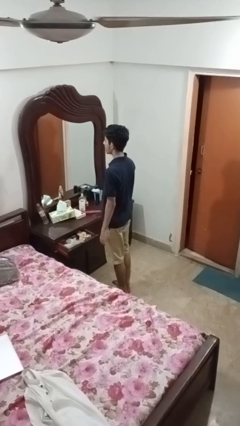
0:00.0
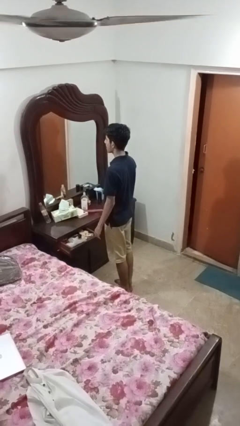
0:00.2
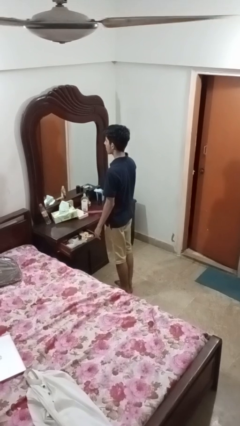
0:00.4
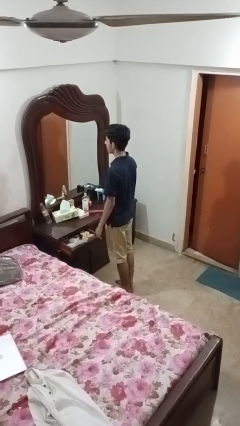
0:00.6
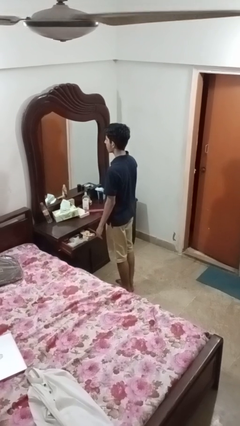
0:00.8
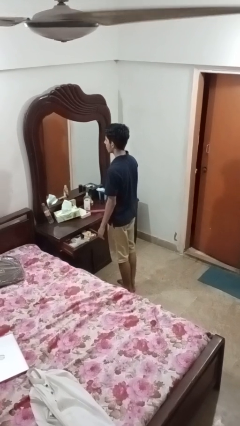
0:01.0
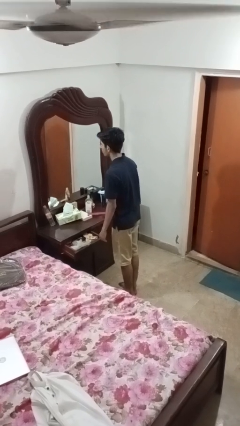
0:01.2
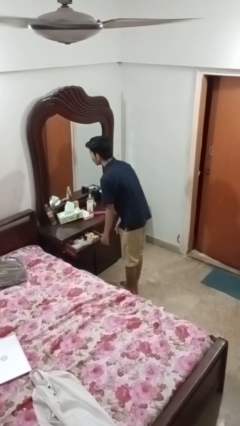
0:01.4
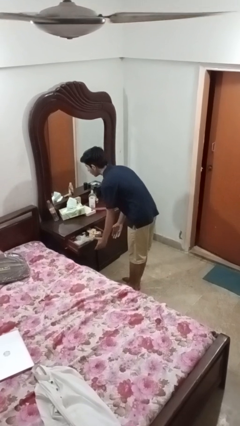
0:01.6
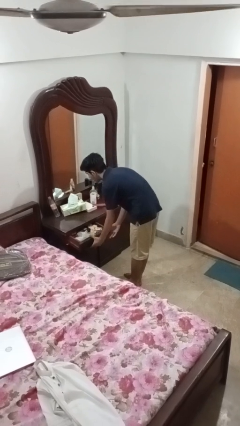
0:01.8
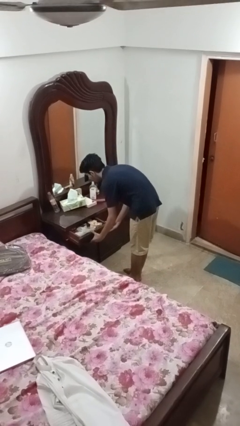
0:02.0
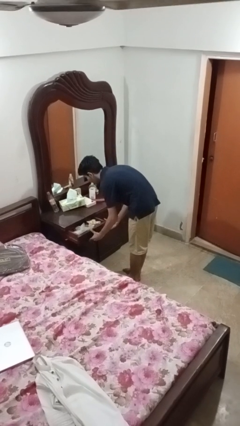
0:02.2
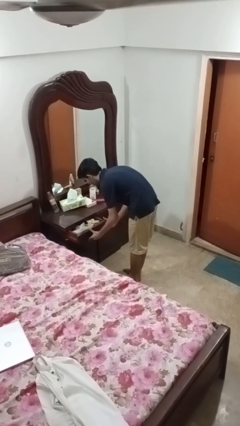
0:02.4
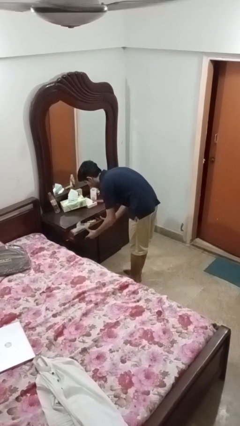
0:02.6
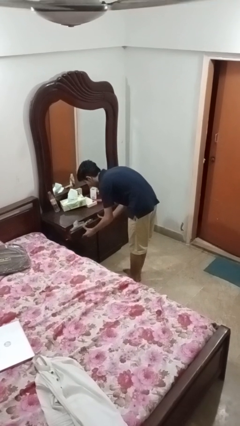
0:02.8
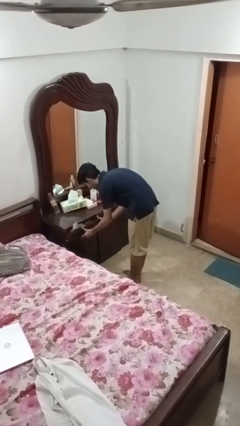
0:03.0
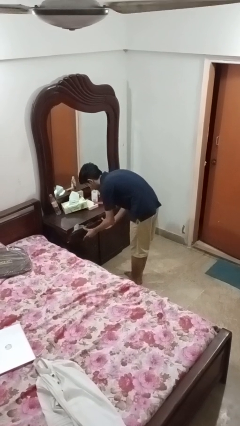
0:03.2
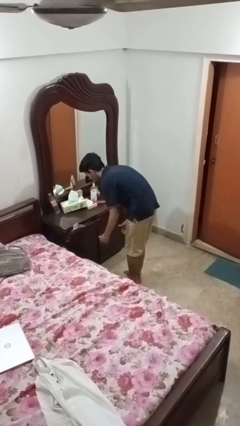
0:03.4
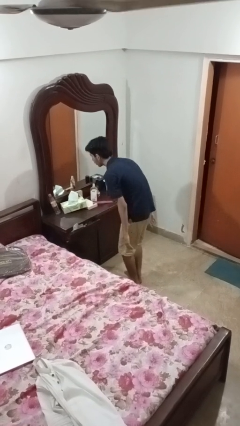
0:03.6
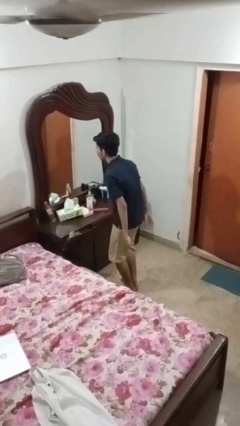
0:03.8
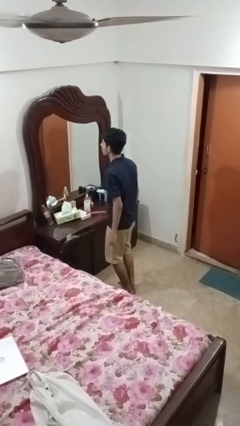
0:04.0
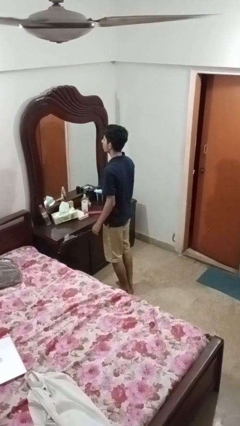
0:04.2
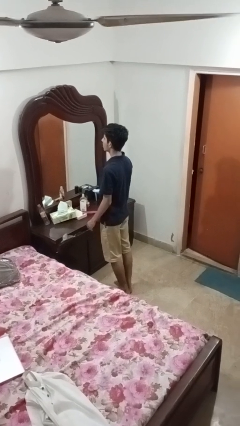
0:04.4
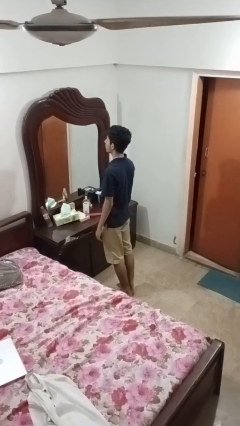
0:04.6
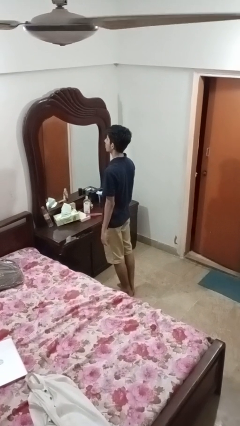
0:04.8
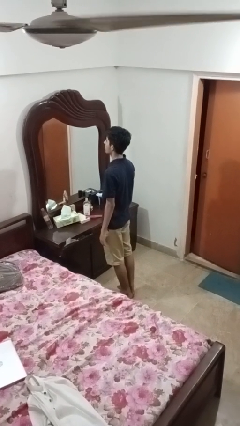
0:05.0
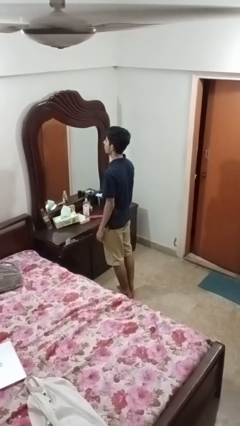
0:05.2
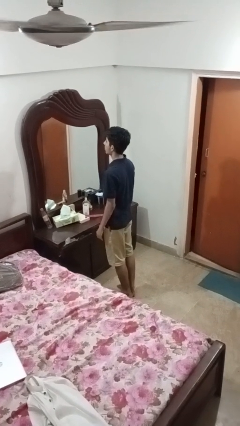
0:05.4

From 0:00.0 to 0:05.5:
person closes dresser drawer

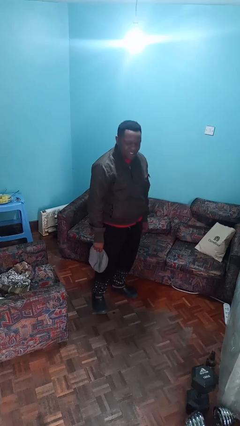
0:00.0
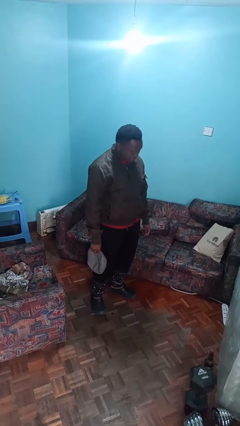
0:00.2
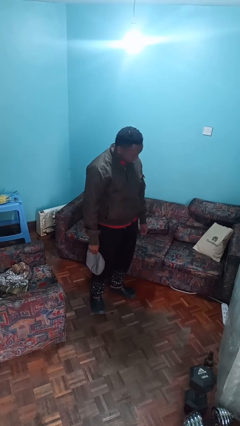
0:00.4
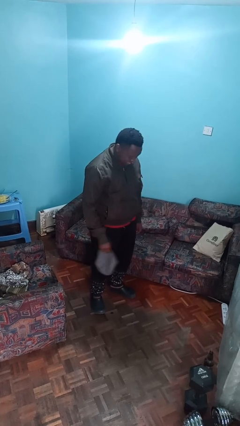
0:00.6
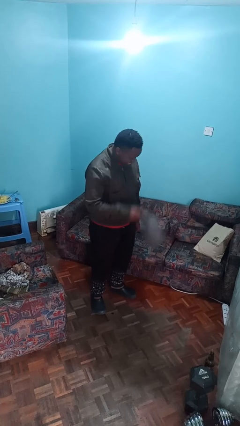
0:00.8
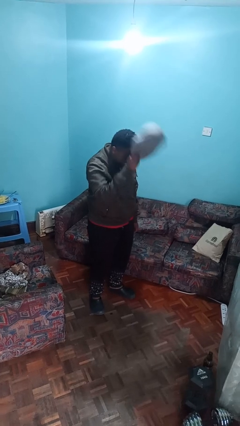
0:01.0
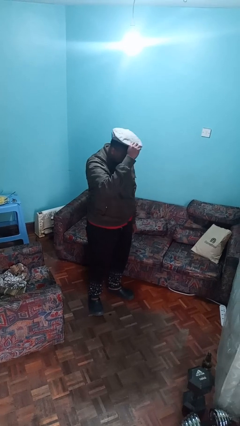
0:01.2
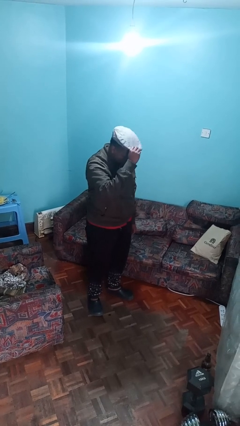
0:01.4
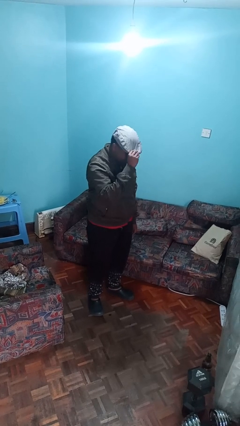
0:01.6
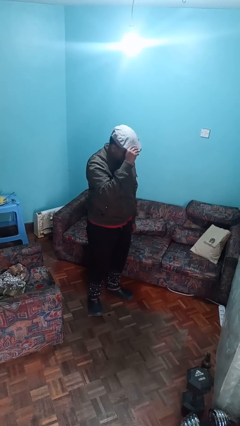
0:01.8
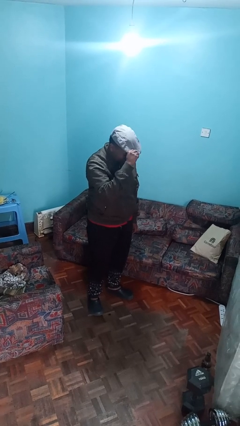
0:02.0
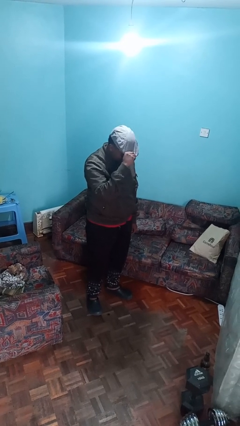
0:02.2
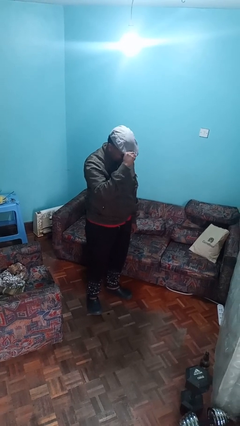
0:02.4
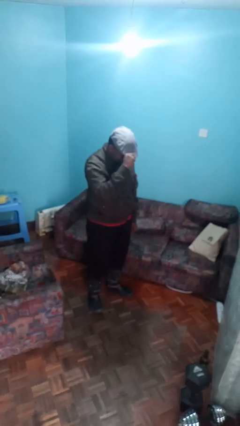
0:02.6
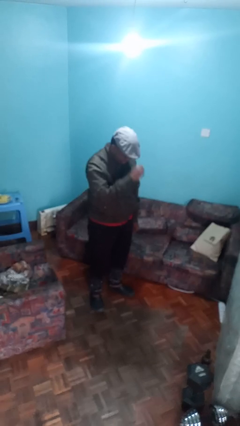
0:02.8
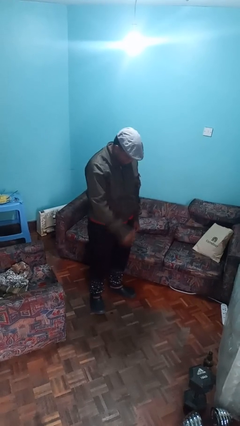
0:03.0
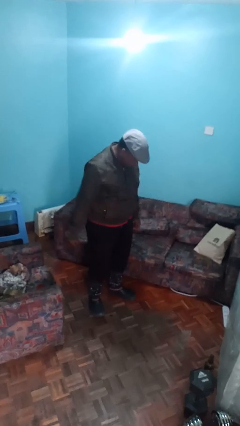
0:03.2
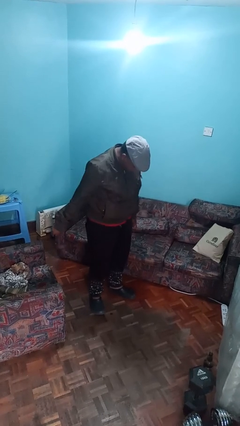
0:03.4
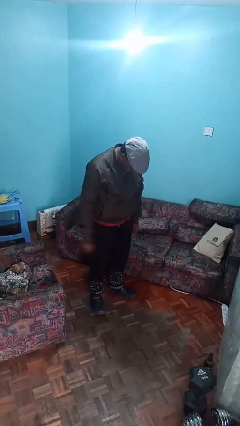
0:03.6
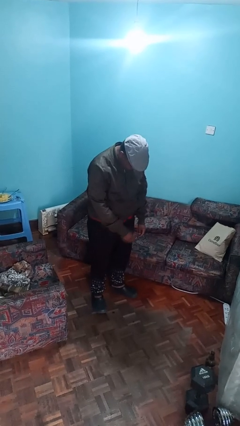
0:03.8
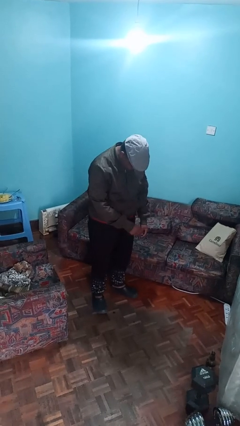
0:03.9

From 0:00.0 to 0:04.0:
person puts on hat

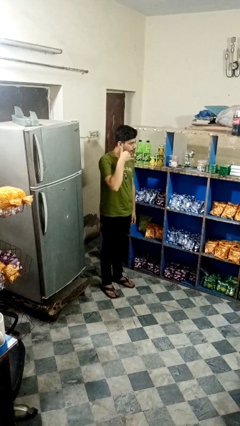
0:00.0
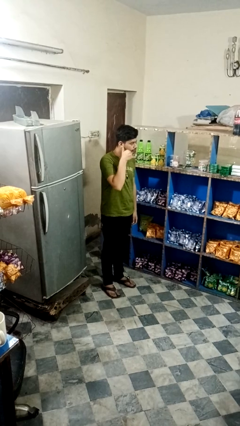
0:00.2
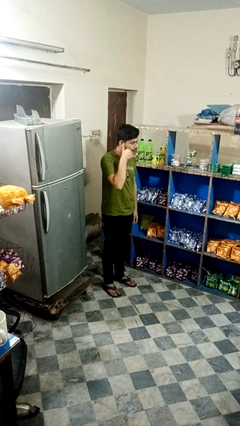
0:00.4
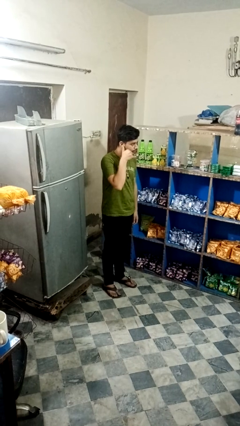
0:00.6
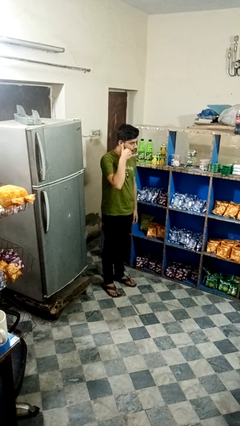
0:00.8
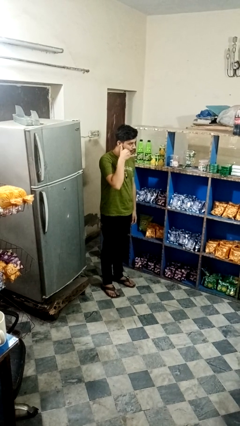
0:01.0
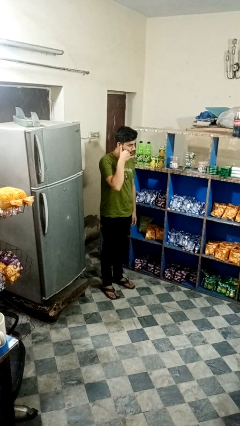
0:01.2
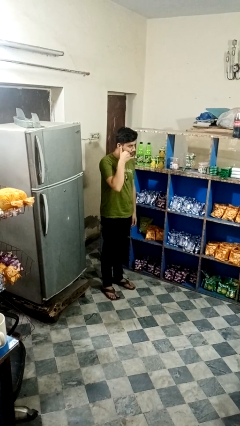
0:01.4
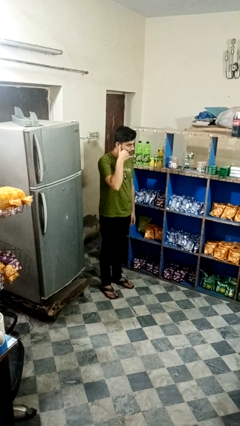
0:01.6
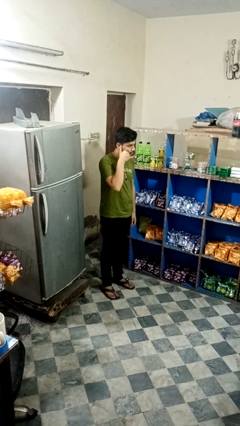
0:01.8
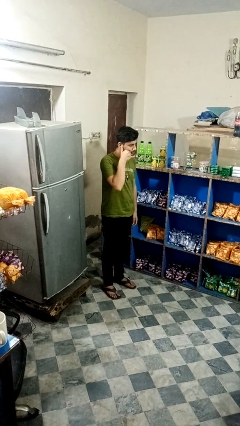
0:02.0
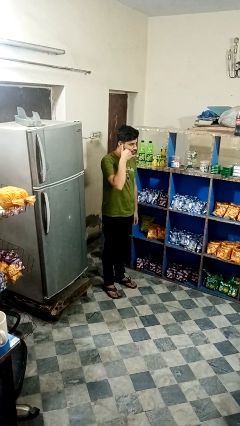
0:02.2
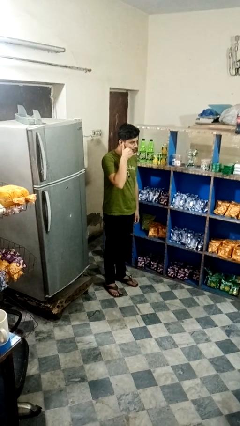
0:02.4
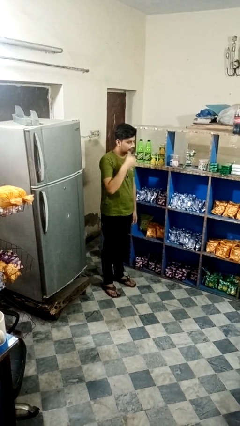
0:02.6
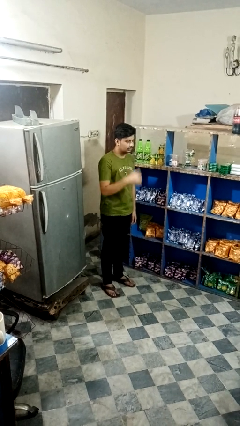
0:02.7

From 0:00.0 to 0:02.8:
person gestures heart

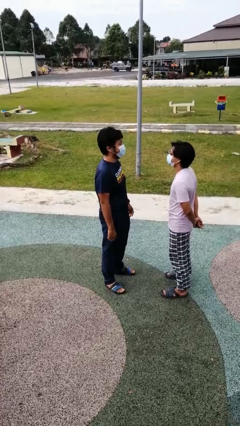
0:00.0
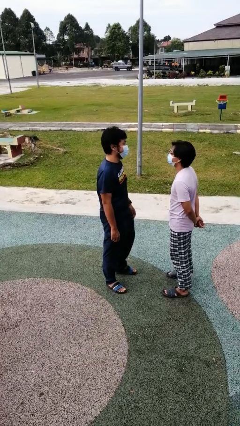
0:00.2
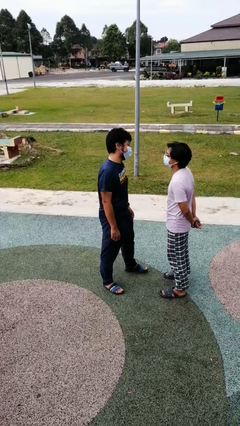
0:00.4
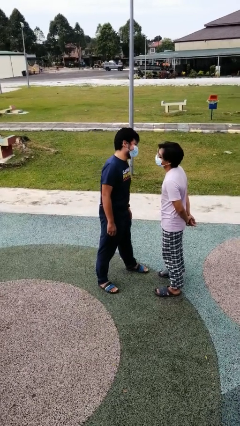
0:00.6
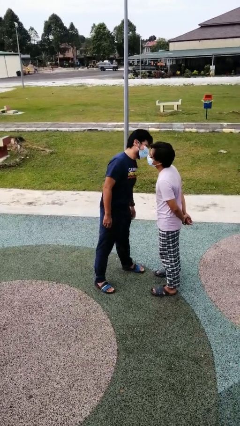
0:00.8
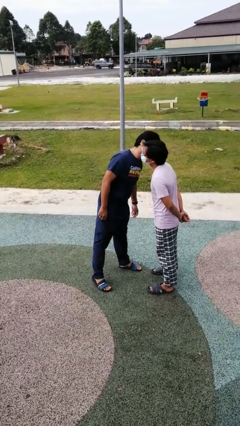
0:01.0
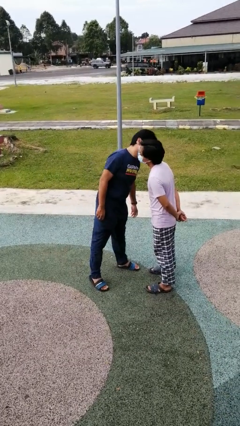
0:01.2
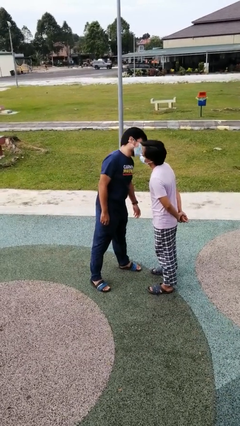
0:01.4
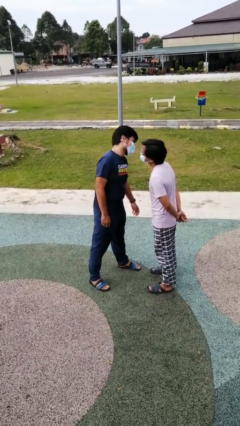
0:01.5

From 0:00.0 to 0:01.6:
person kisses cheek of person

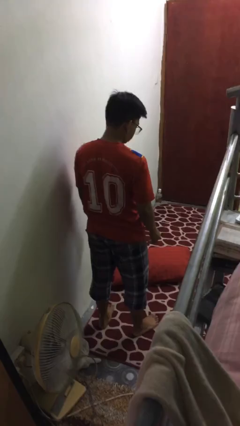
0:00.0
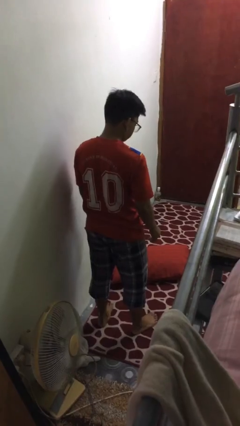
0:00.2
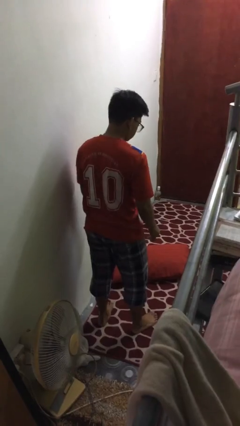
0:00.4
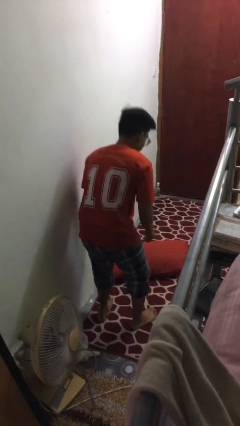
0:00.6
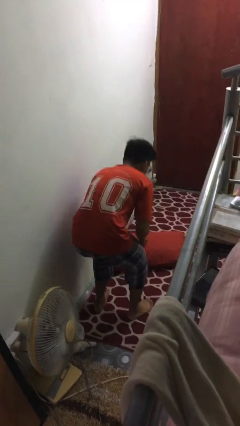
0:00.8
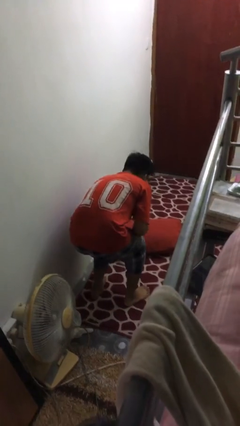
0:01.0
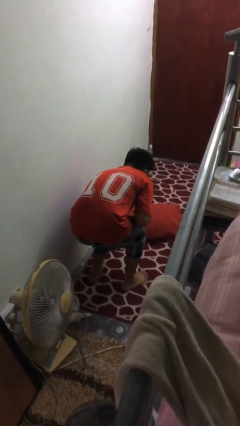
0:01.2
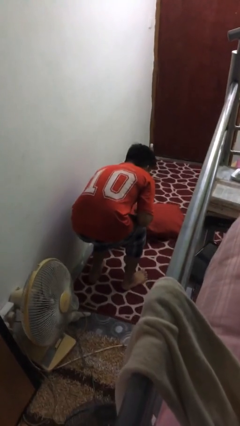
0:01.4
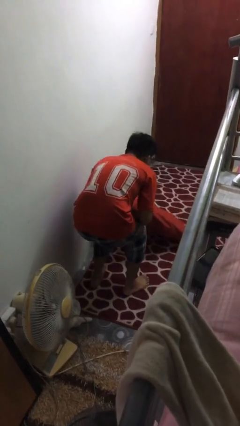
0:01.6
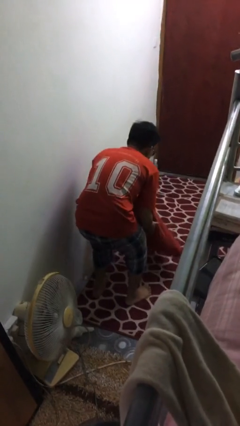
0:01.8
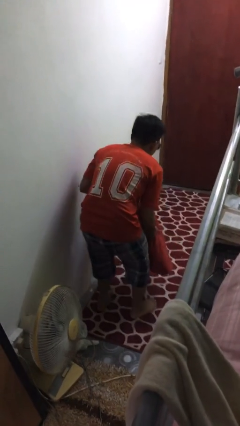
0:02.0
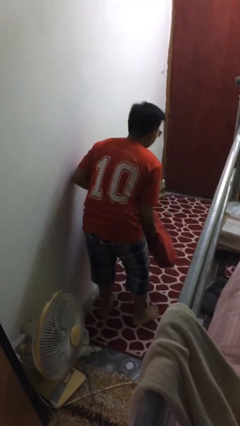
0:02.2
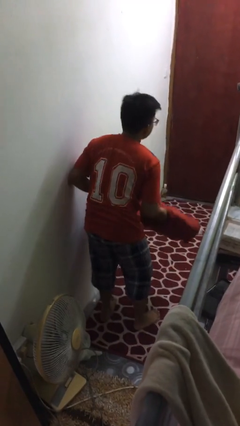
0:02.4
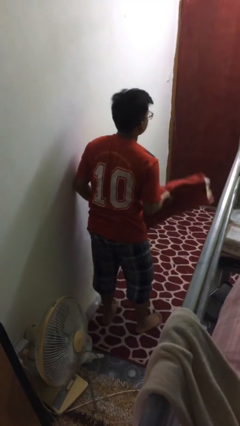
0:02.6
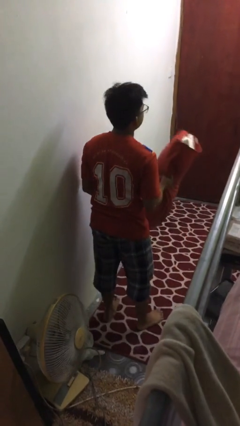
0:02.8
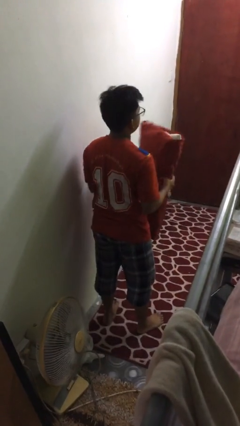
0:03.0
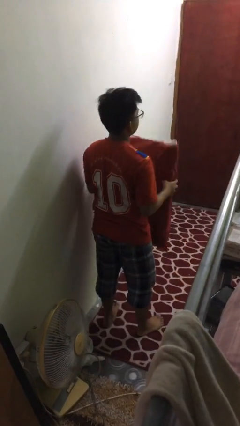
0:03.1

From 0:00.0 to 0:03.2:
person picks up object from floor

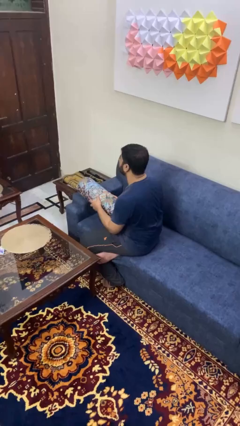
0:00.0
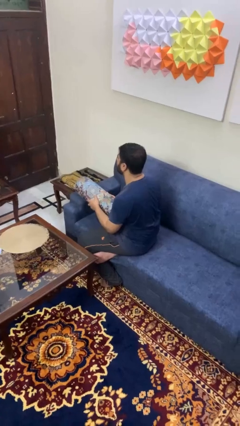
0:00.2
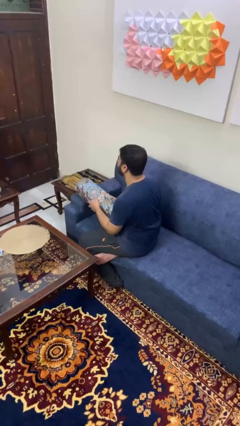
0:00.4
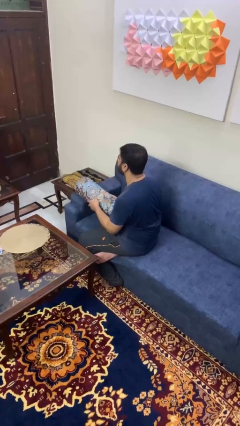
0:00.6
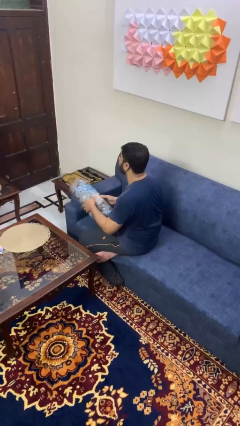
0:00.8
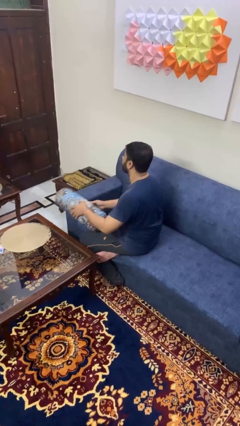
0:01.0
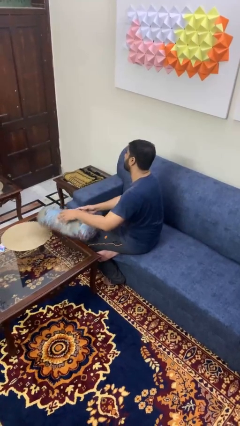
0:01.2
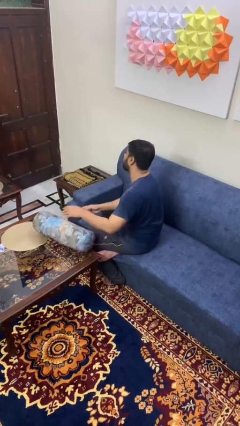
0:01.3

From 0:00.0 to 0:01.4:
person throws object on table
